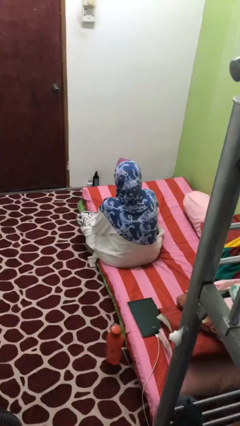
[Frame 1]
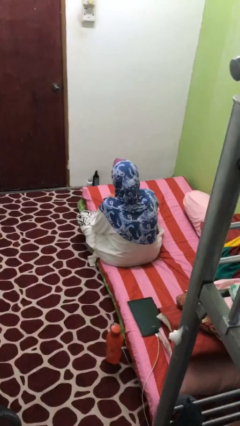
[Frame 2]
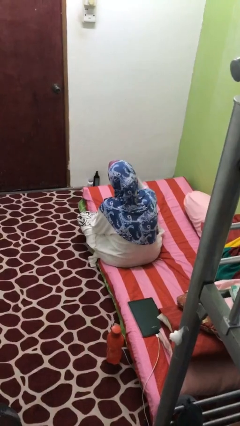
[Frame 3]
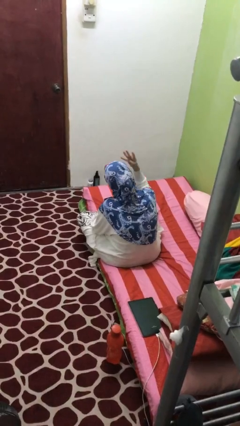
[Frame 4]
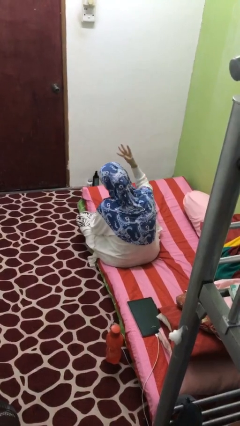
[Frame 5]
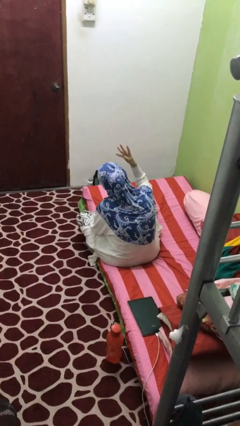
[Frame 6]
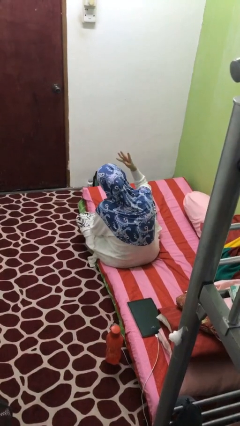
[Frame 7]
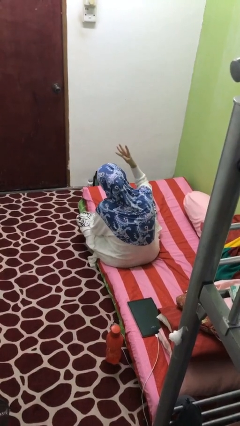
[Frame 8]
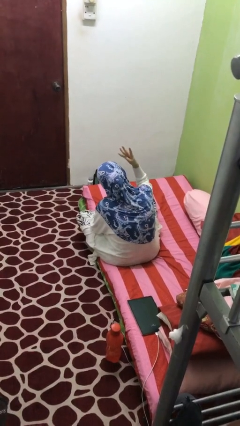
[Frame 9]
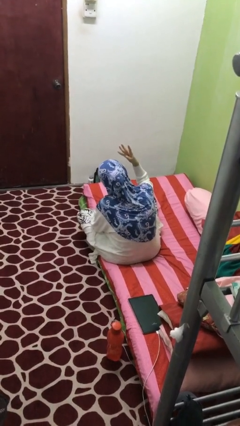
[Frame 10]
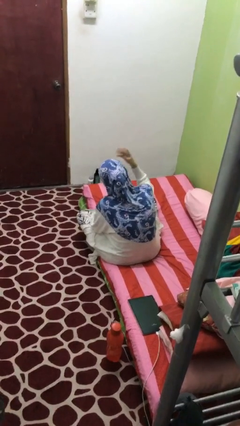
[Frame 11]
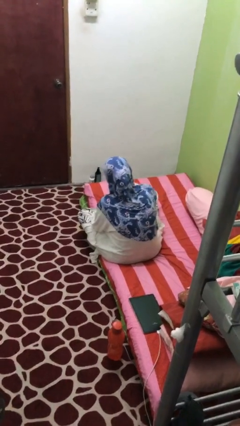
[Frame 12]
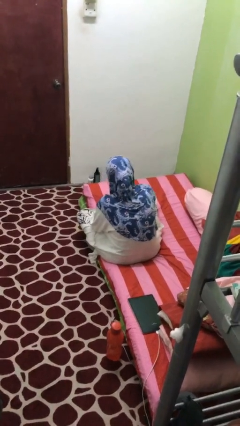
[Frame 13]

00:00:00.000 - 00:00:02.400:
person gestures number four

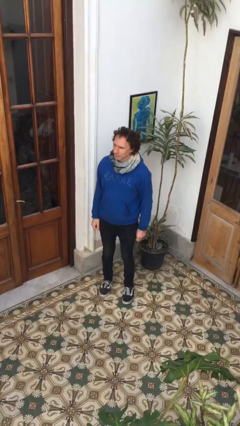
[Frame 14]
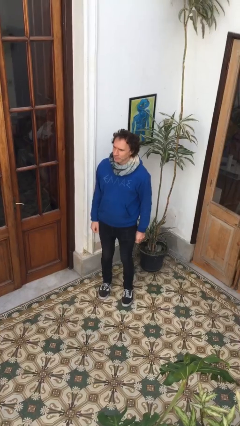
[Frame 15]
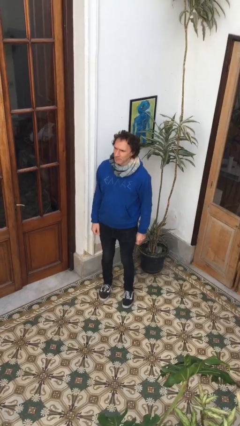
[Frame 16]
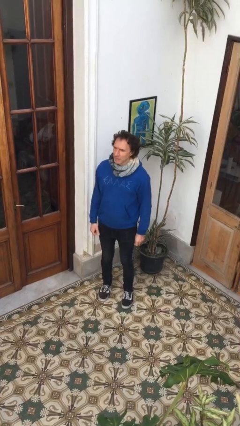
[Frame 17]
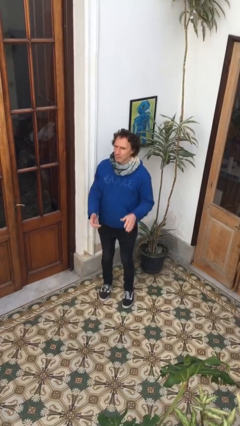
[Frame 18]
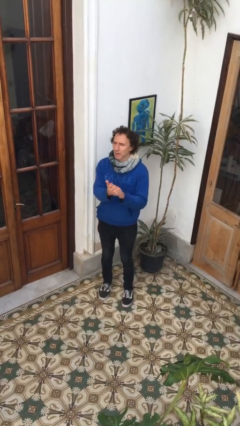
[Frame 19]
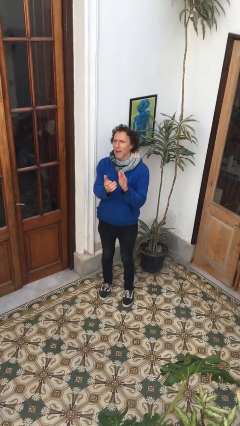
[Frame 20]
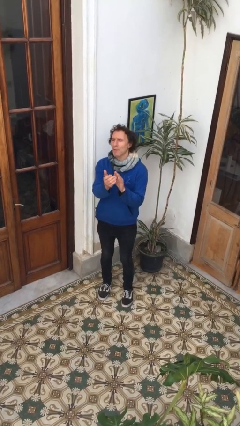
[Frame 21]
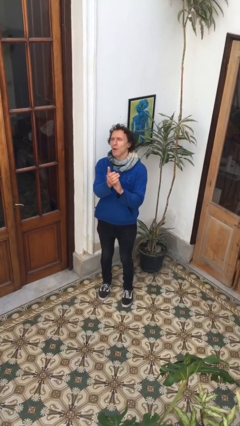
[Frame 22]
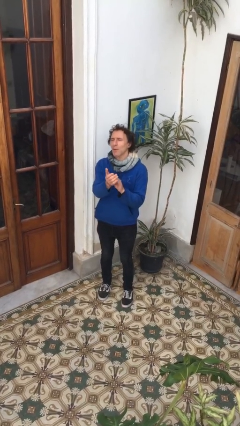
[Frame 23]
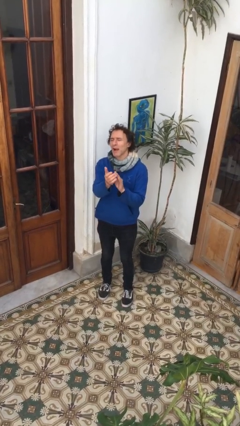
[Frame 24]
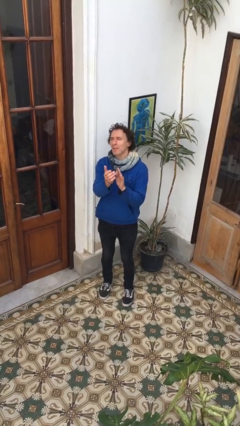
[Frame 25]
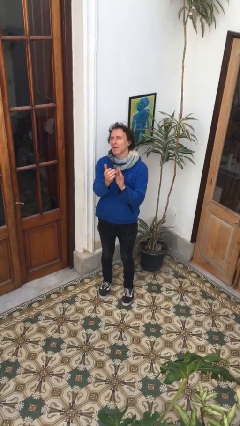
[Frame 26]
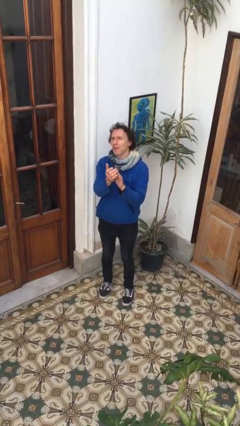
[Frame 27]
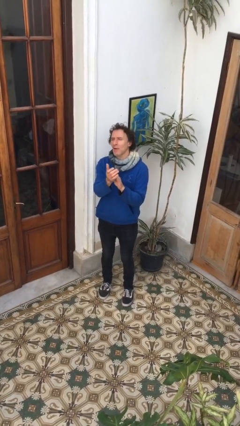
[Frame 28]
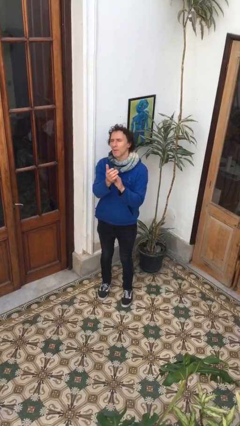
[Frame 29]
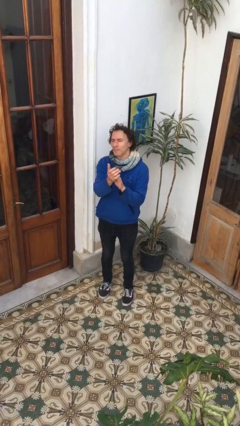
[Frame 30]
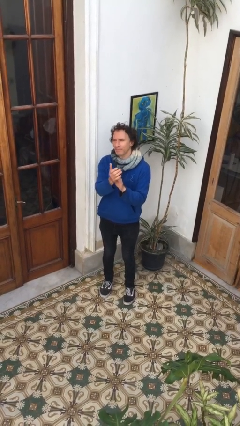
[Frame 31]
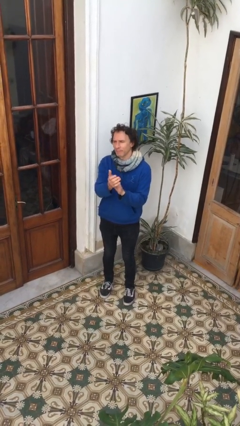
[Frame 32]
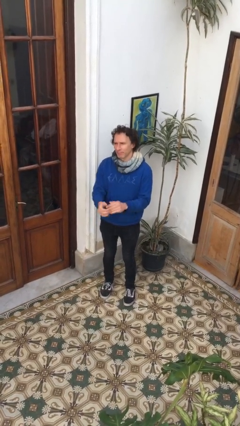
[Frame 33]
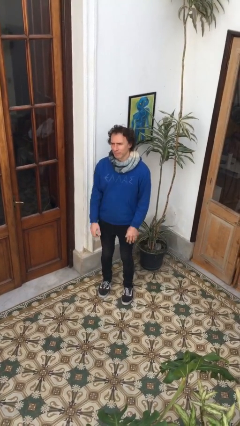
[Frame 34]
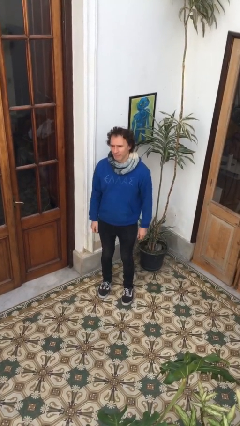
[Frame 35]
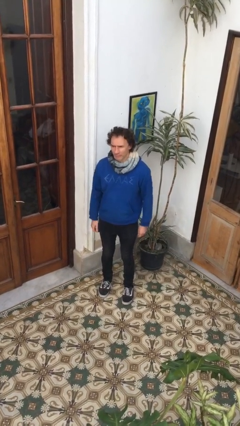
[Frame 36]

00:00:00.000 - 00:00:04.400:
person claps hands

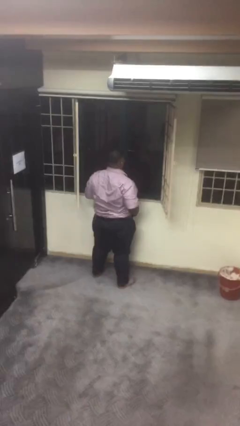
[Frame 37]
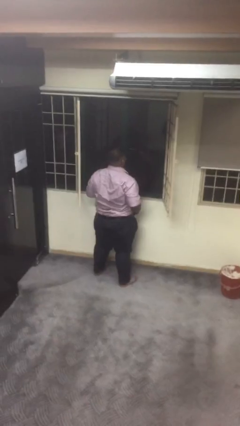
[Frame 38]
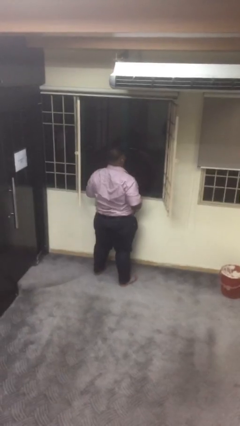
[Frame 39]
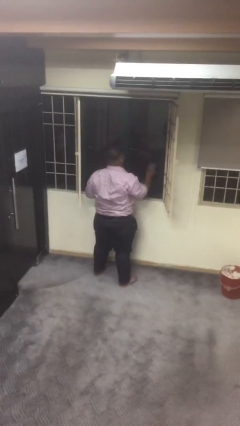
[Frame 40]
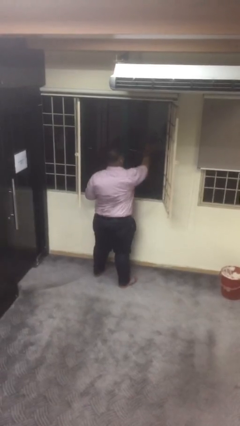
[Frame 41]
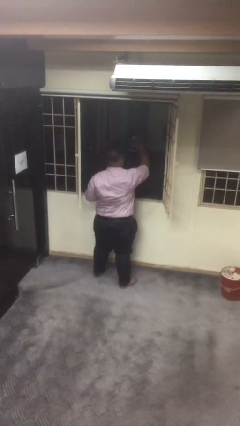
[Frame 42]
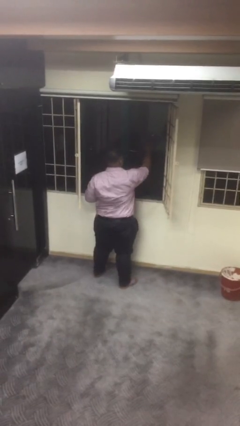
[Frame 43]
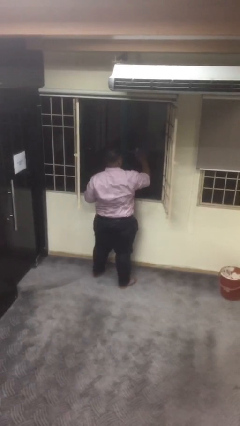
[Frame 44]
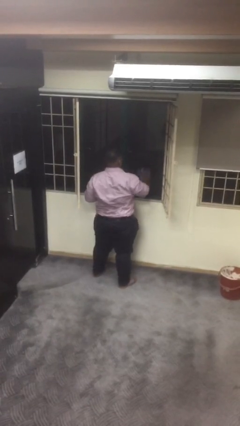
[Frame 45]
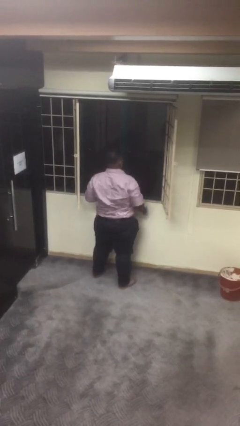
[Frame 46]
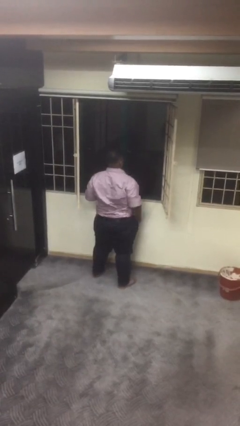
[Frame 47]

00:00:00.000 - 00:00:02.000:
person washes window

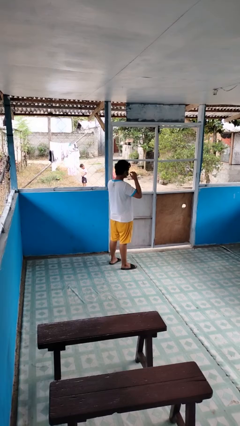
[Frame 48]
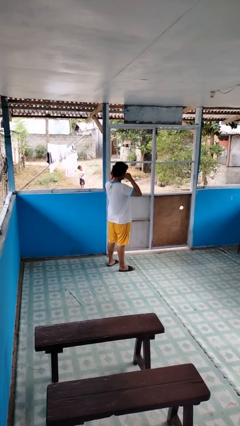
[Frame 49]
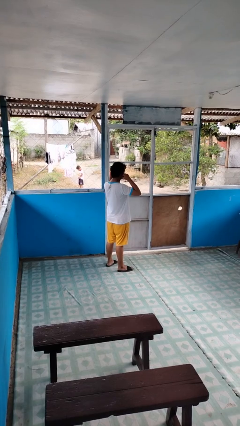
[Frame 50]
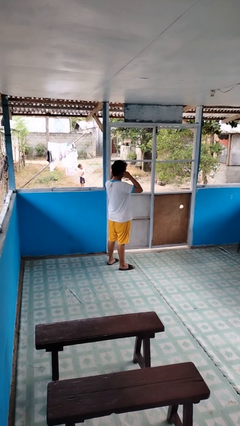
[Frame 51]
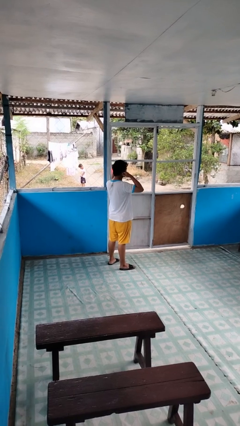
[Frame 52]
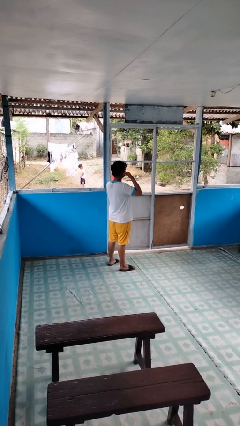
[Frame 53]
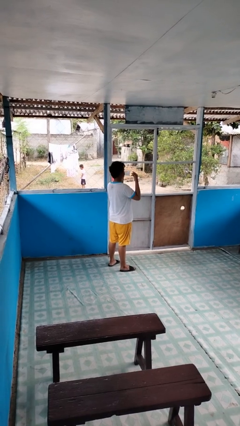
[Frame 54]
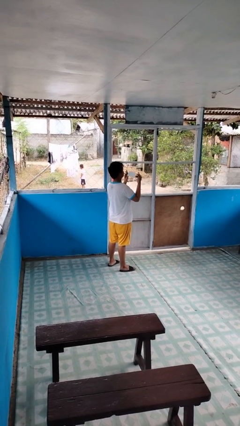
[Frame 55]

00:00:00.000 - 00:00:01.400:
person takes off facemask

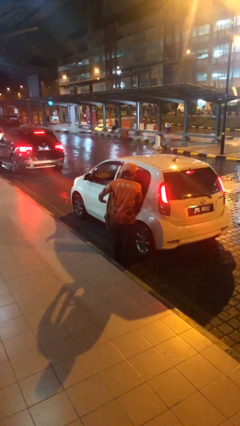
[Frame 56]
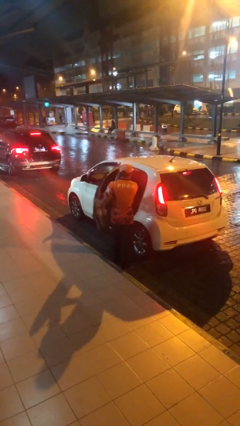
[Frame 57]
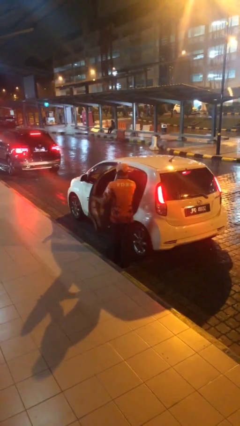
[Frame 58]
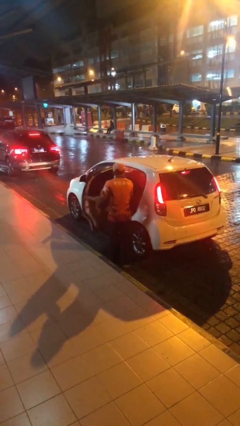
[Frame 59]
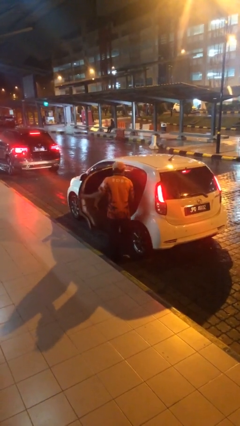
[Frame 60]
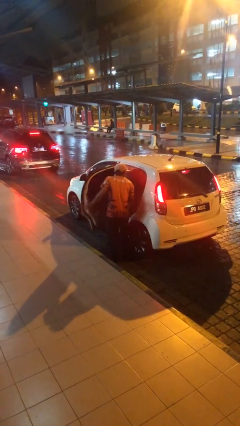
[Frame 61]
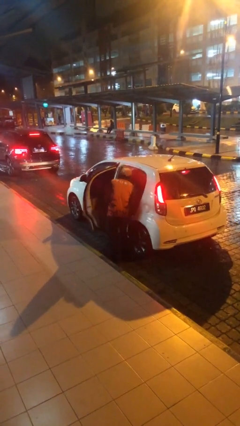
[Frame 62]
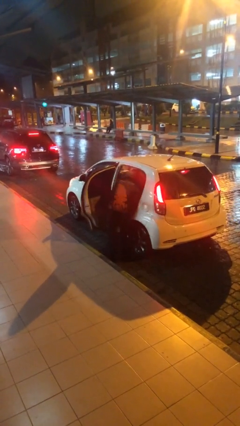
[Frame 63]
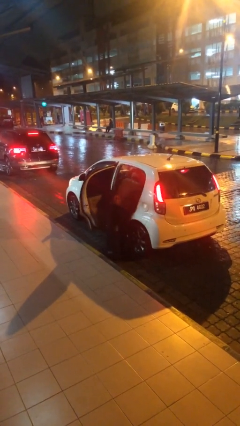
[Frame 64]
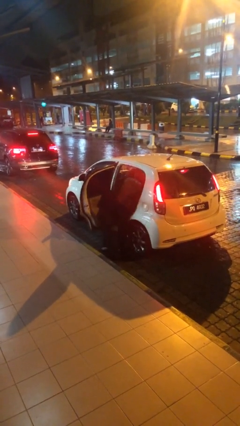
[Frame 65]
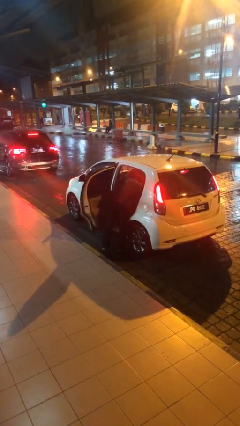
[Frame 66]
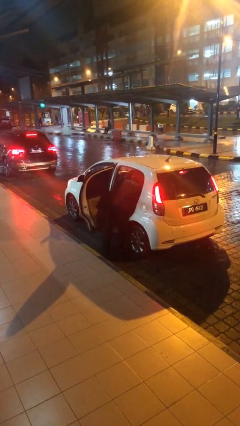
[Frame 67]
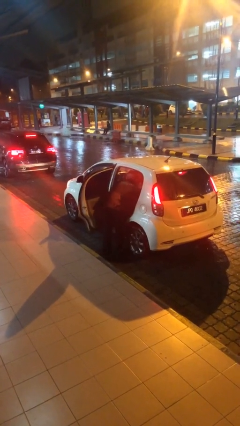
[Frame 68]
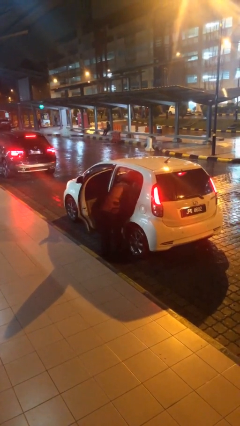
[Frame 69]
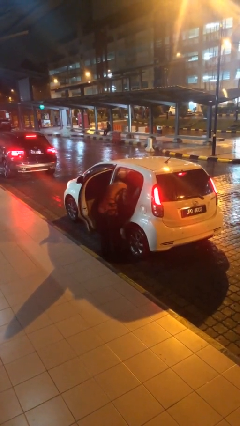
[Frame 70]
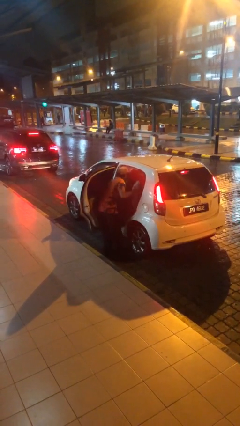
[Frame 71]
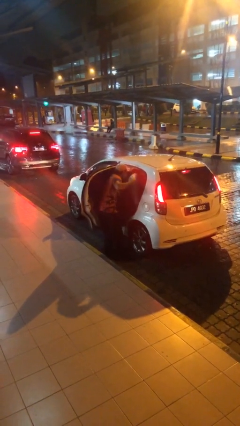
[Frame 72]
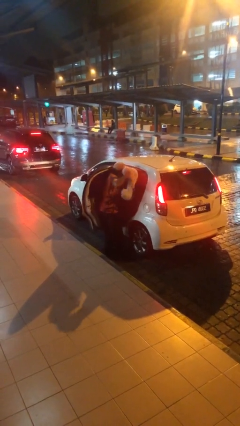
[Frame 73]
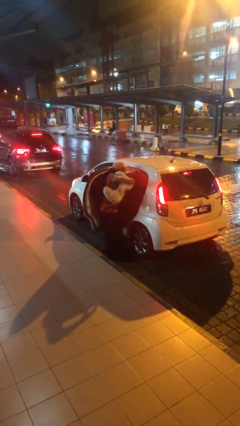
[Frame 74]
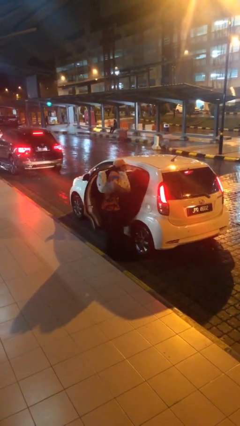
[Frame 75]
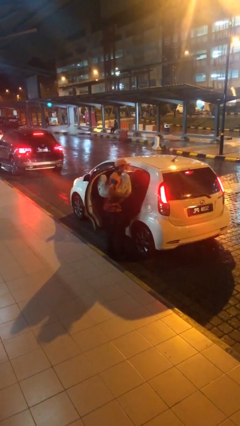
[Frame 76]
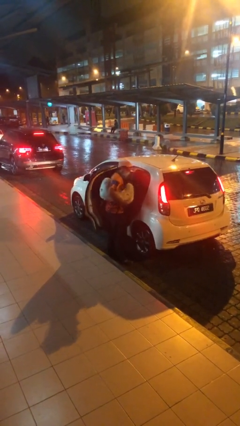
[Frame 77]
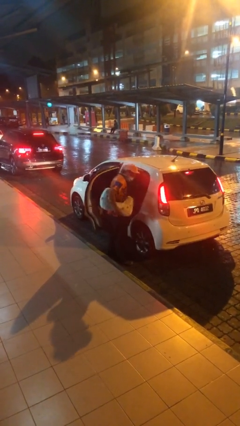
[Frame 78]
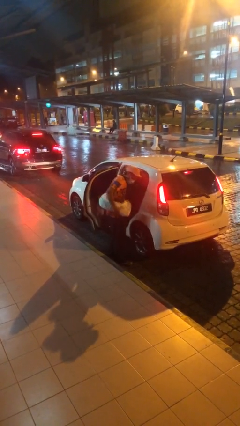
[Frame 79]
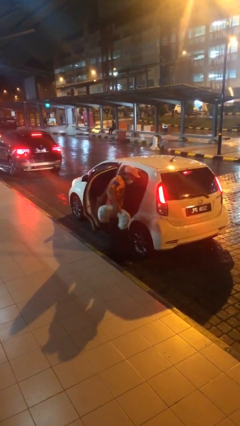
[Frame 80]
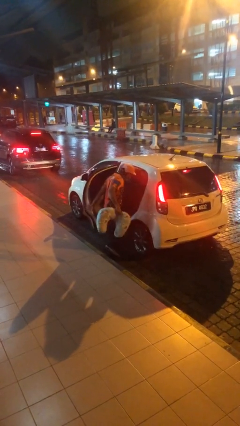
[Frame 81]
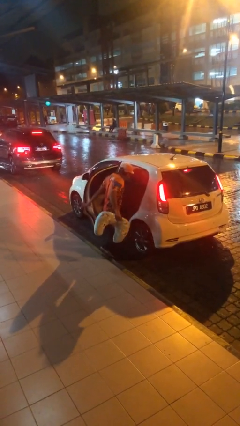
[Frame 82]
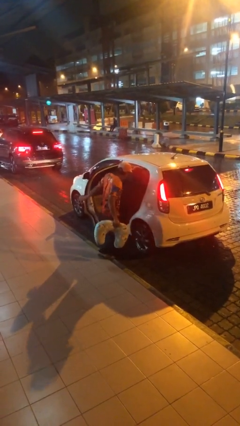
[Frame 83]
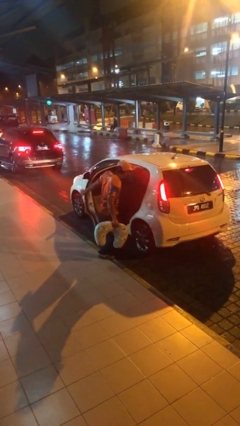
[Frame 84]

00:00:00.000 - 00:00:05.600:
person unloads car

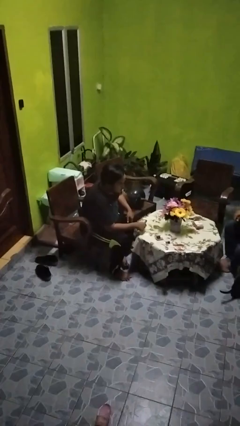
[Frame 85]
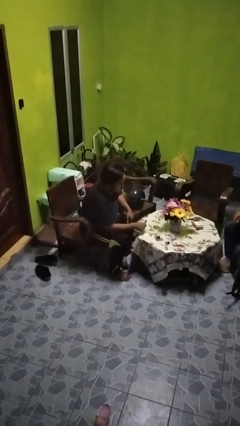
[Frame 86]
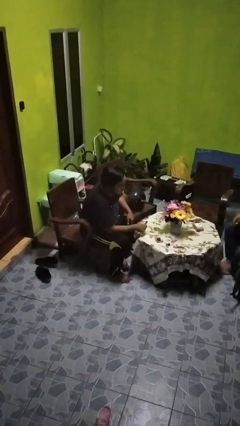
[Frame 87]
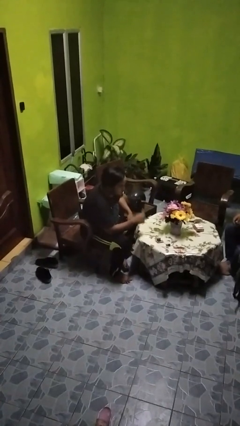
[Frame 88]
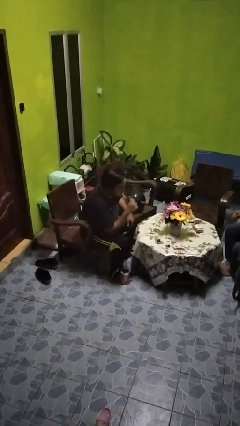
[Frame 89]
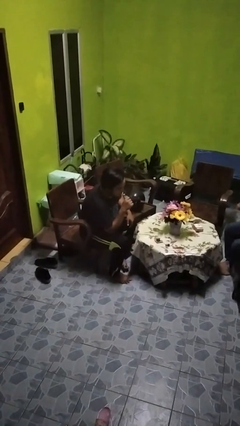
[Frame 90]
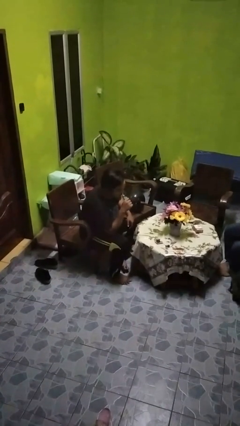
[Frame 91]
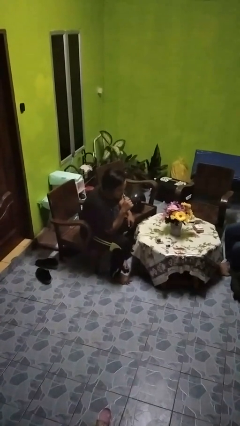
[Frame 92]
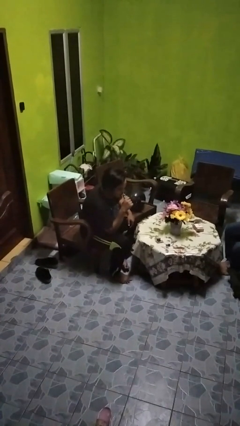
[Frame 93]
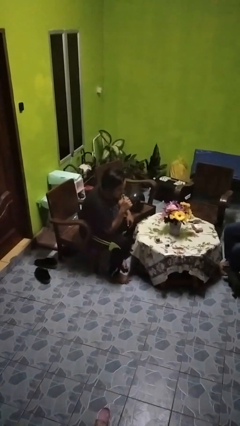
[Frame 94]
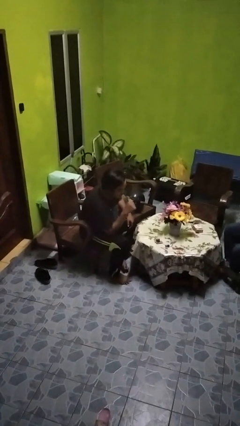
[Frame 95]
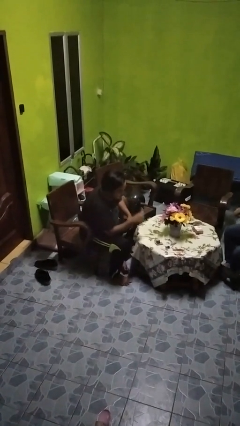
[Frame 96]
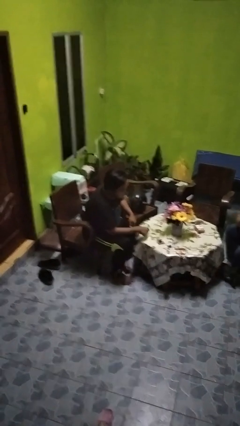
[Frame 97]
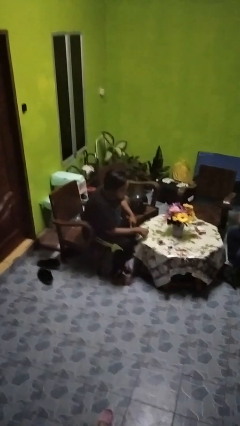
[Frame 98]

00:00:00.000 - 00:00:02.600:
person vapes
